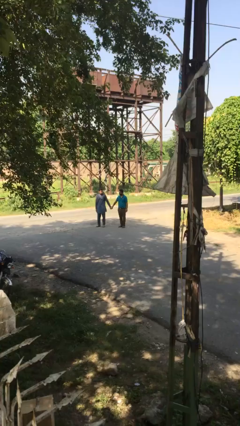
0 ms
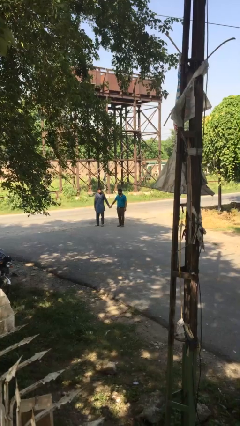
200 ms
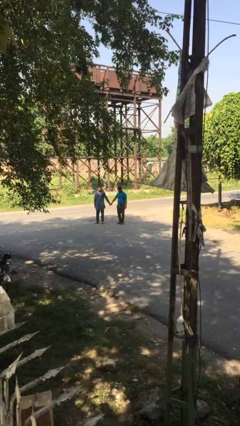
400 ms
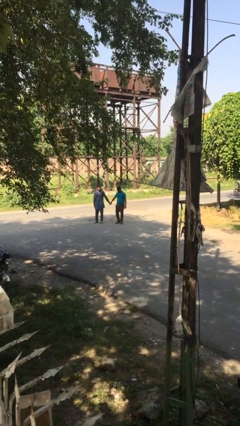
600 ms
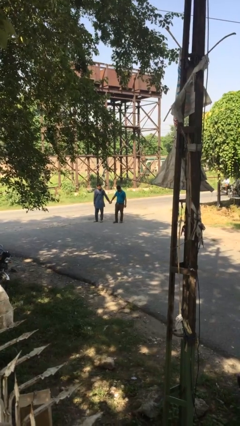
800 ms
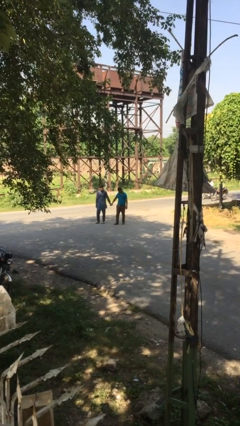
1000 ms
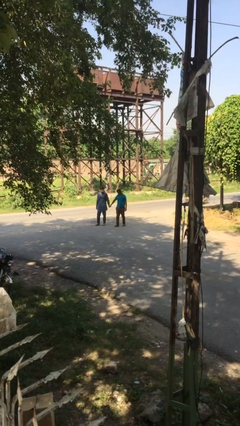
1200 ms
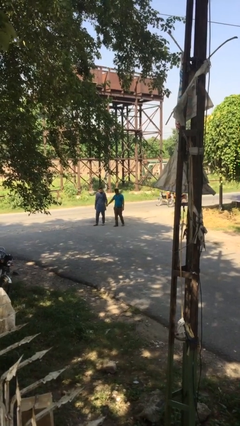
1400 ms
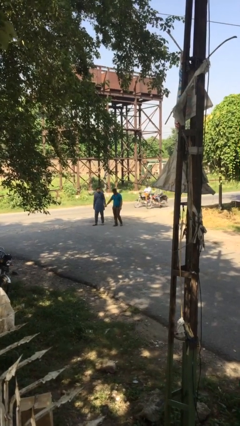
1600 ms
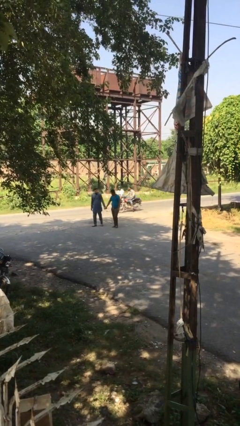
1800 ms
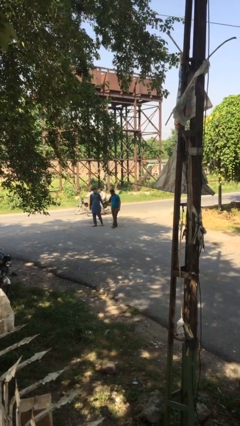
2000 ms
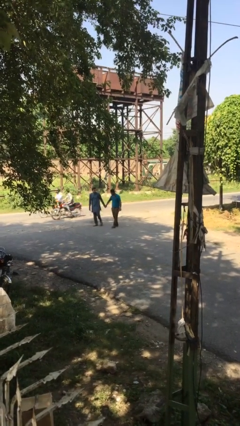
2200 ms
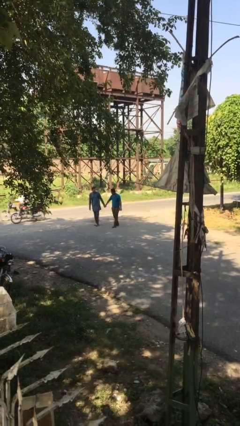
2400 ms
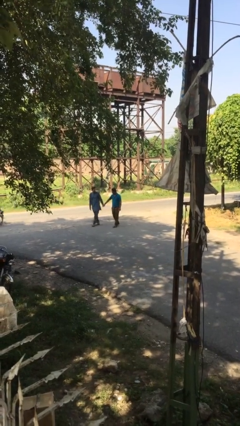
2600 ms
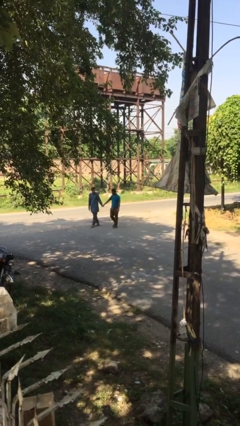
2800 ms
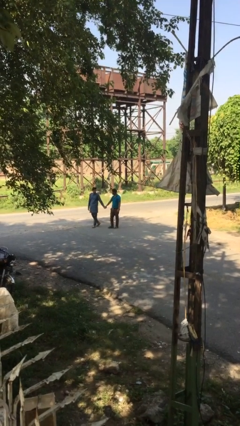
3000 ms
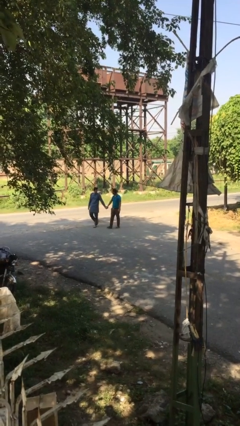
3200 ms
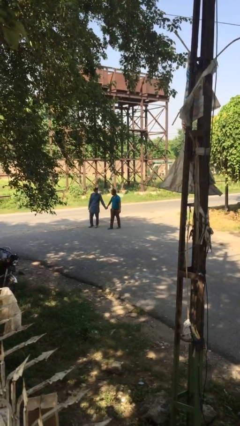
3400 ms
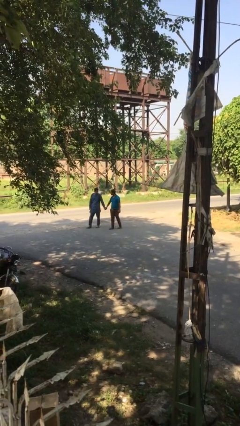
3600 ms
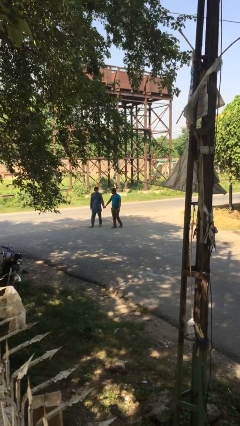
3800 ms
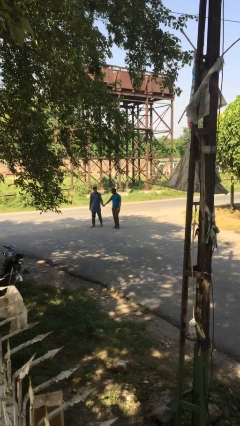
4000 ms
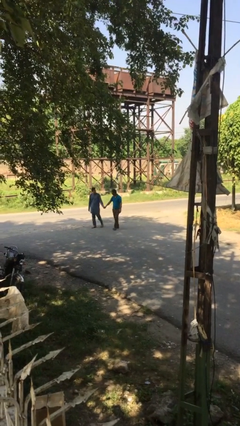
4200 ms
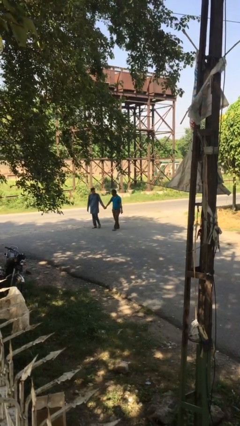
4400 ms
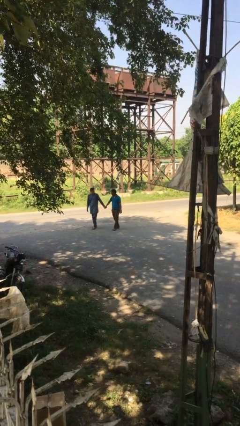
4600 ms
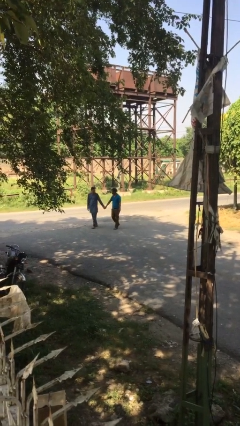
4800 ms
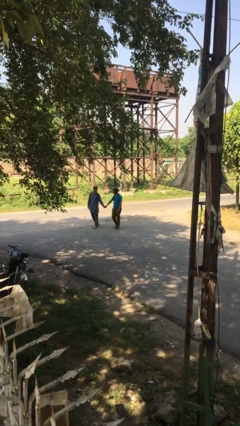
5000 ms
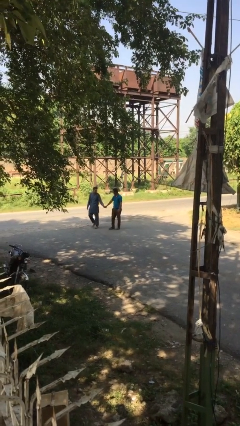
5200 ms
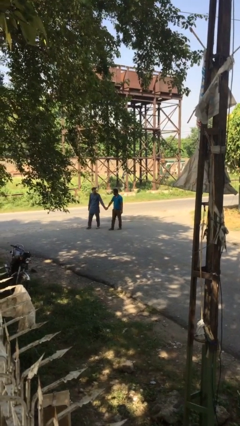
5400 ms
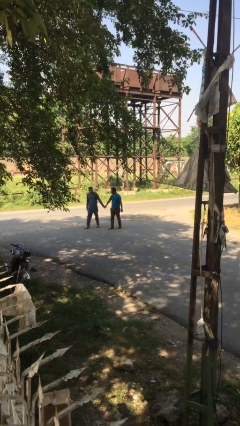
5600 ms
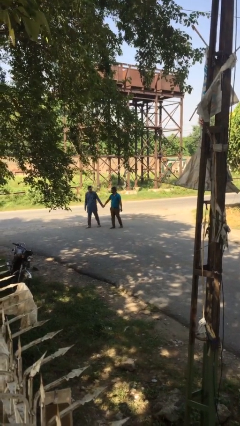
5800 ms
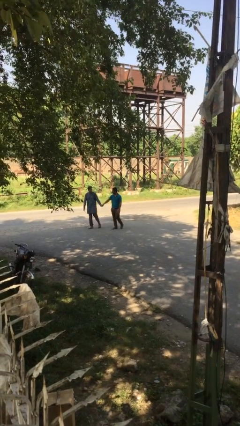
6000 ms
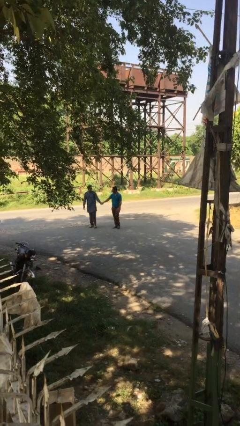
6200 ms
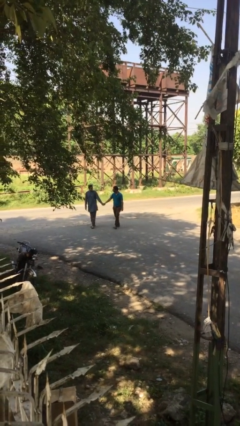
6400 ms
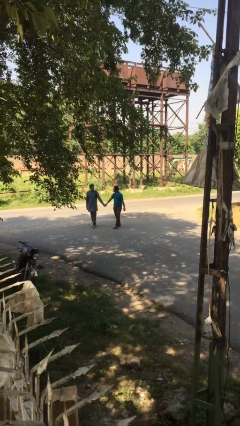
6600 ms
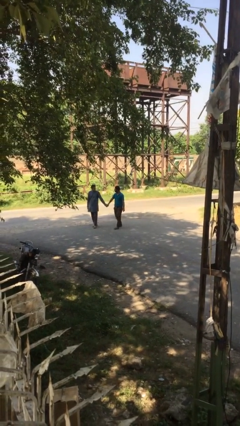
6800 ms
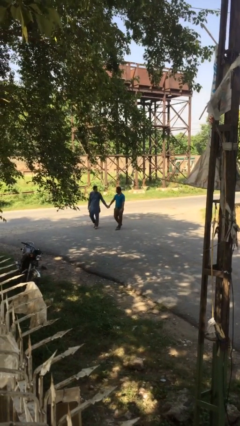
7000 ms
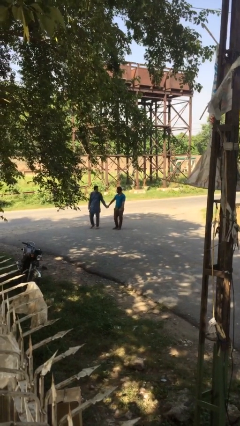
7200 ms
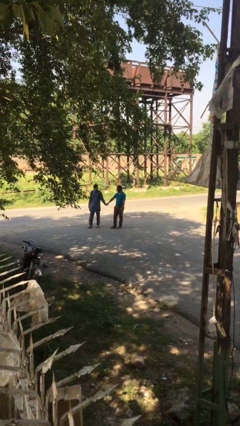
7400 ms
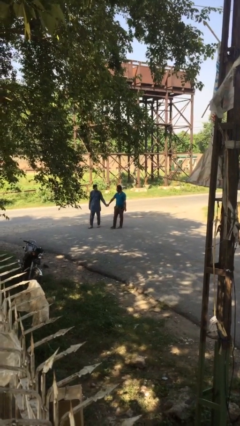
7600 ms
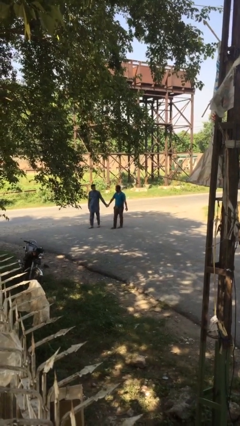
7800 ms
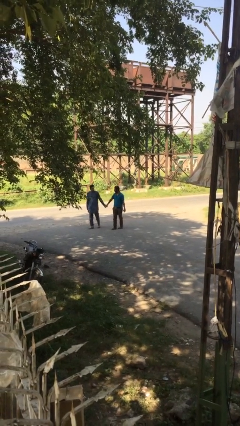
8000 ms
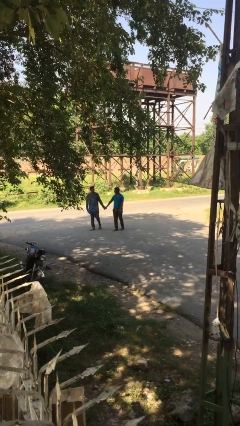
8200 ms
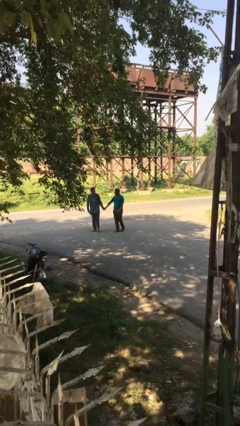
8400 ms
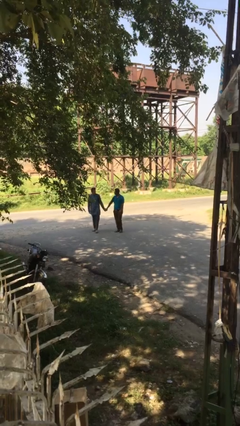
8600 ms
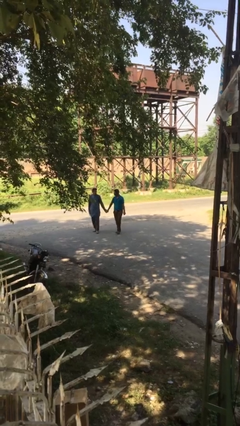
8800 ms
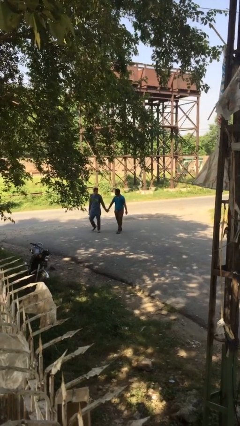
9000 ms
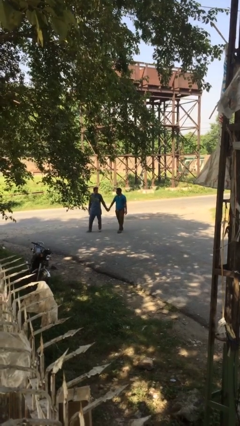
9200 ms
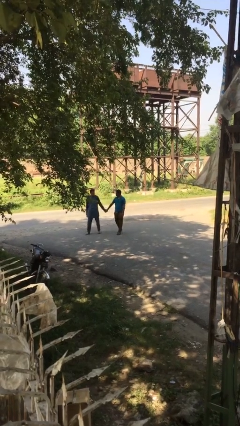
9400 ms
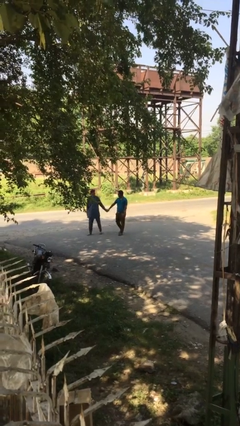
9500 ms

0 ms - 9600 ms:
person holds hand

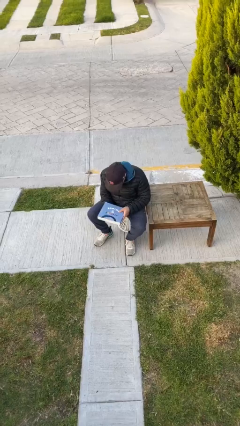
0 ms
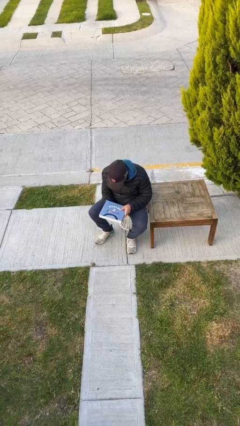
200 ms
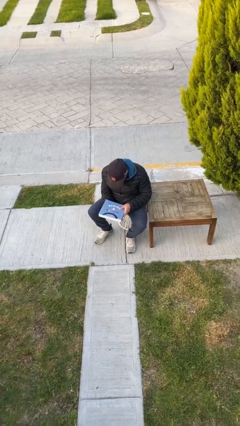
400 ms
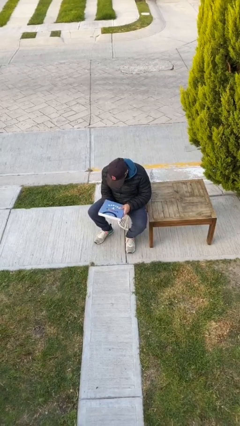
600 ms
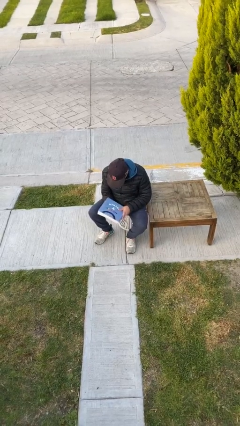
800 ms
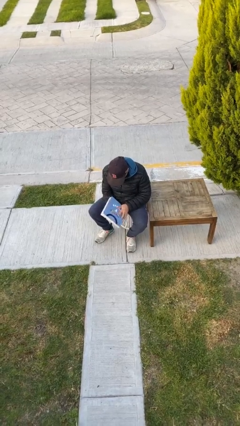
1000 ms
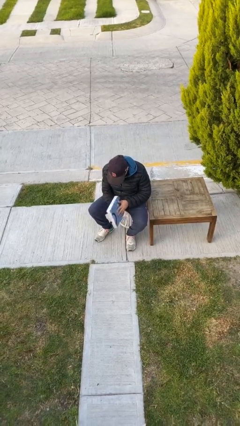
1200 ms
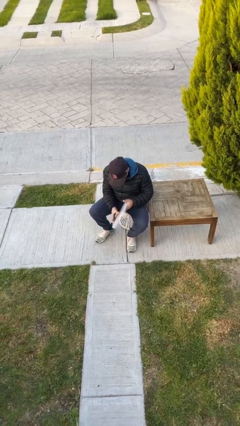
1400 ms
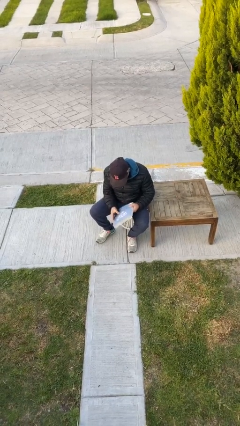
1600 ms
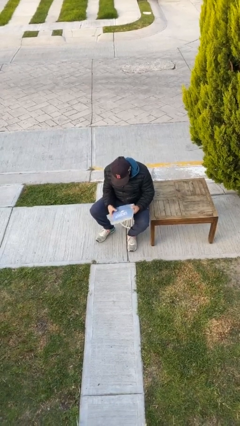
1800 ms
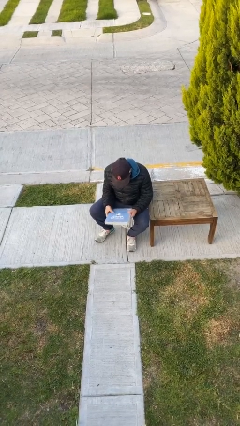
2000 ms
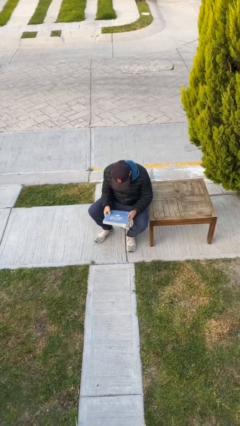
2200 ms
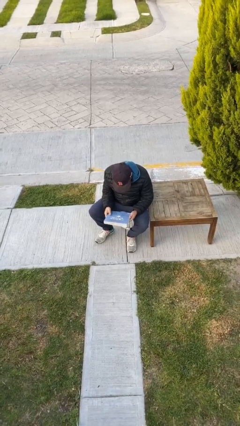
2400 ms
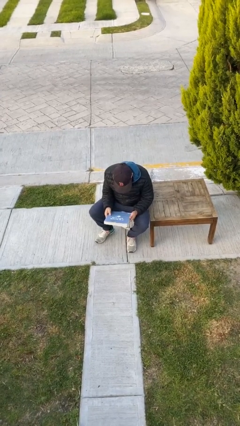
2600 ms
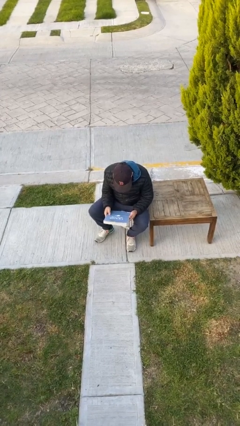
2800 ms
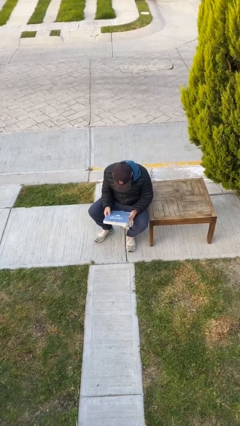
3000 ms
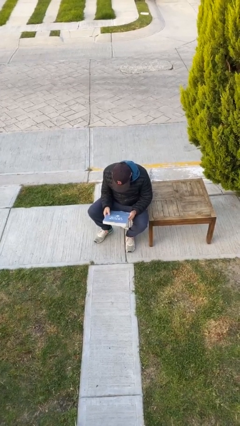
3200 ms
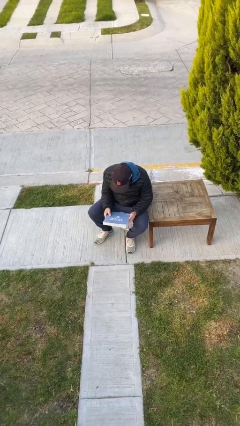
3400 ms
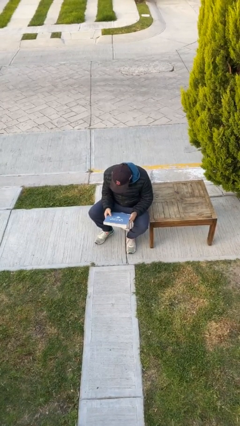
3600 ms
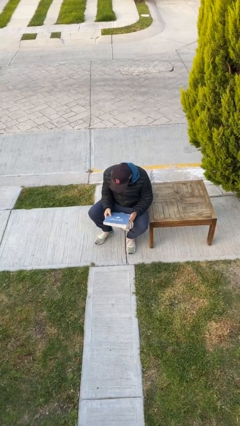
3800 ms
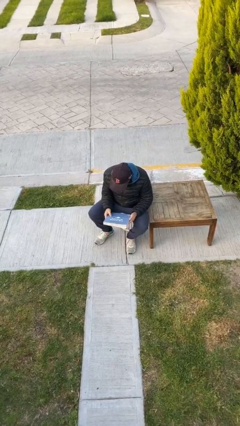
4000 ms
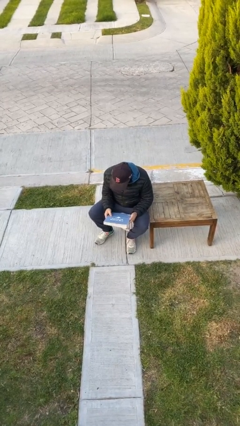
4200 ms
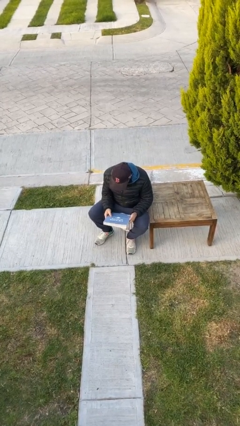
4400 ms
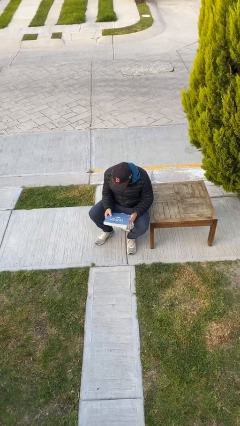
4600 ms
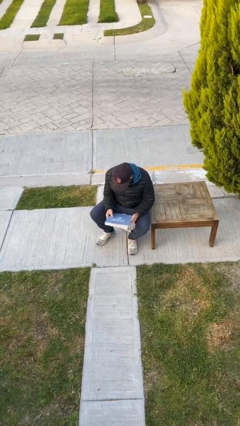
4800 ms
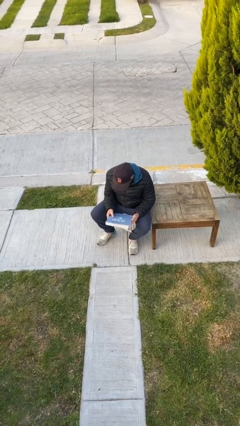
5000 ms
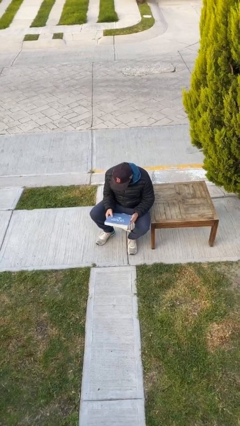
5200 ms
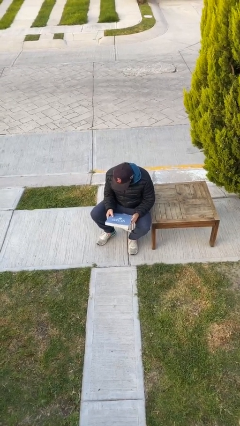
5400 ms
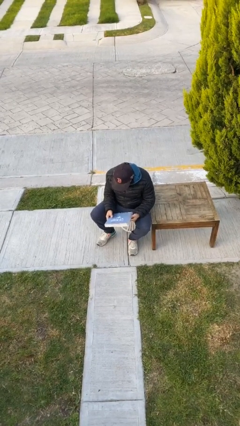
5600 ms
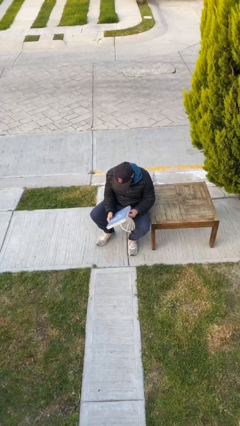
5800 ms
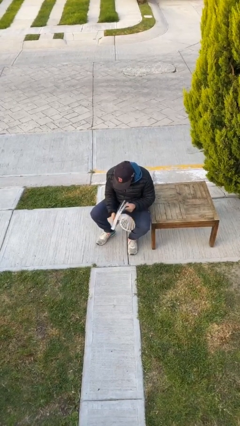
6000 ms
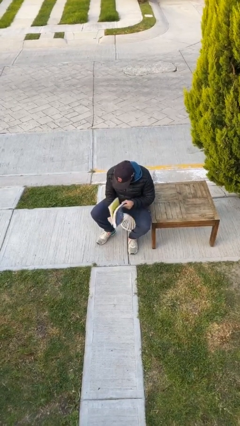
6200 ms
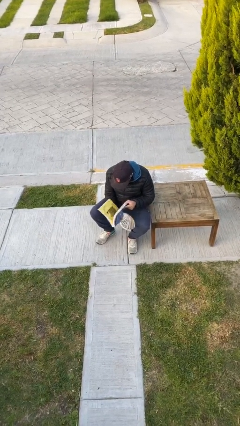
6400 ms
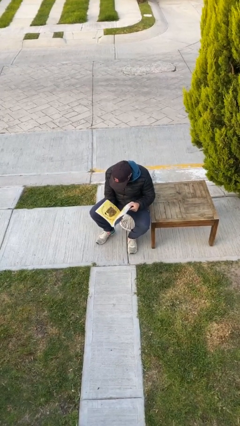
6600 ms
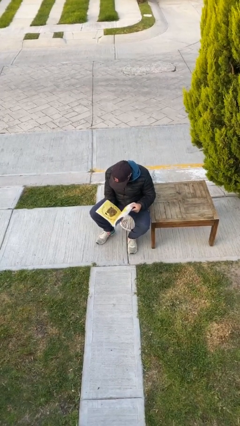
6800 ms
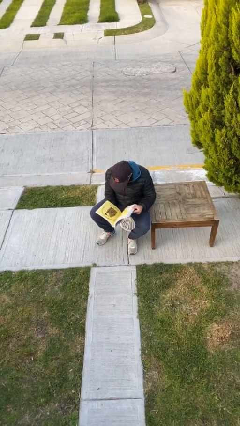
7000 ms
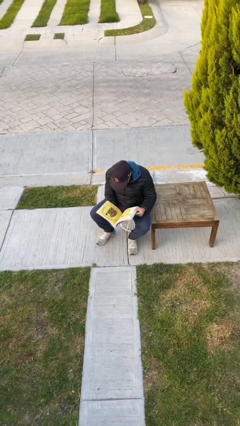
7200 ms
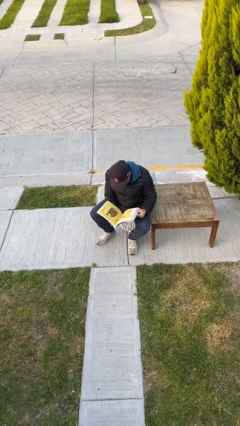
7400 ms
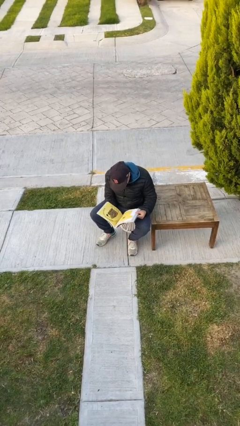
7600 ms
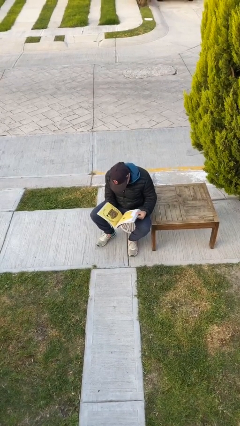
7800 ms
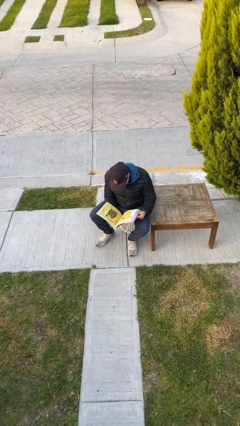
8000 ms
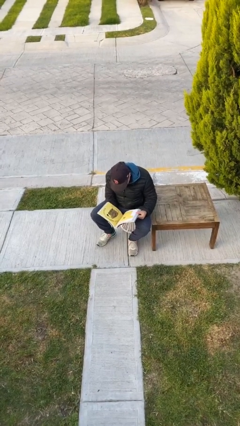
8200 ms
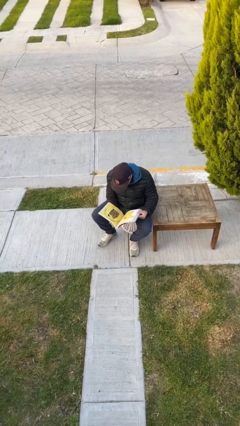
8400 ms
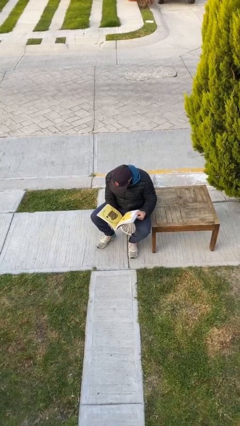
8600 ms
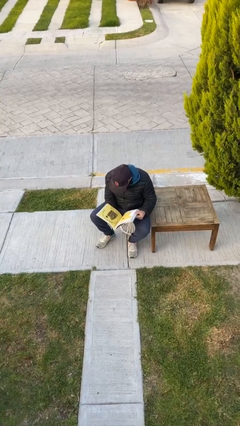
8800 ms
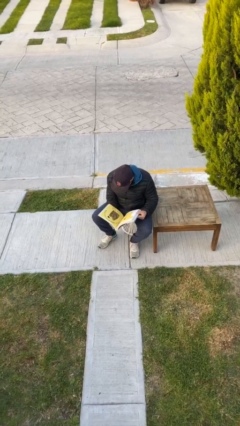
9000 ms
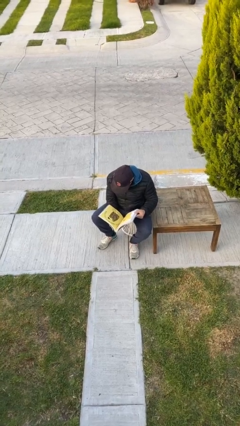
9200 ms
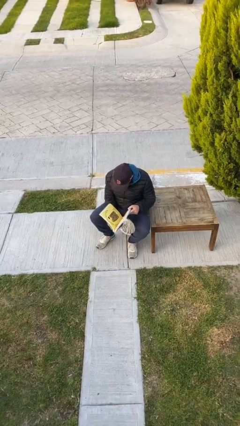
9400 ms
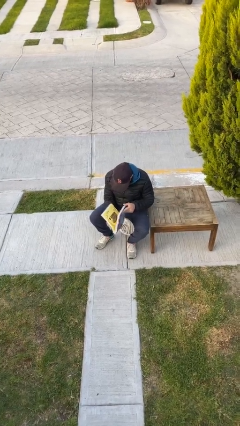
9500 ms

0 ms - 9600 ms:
person reads document
